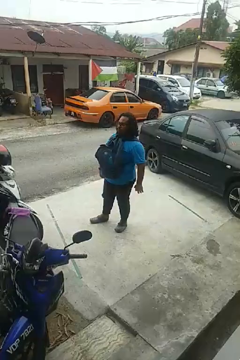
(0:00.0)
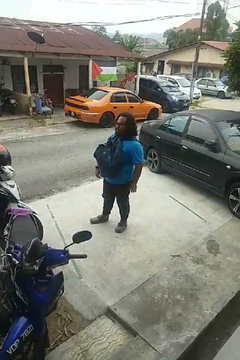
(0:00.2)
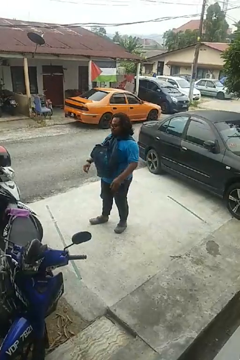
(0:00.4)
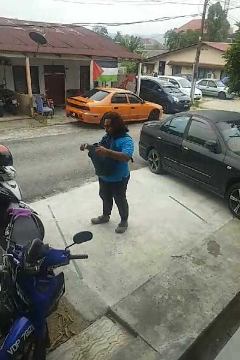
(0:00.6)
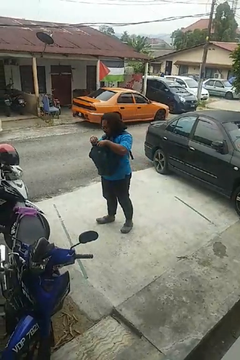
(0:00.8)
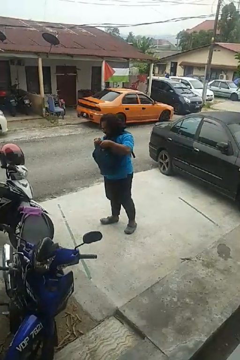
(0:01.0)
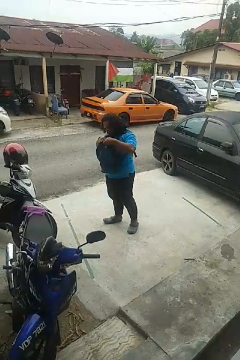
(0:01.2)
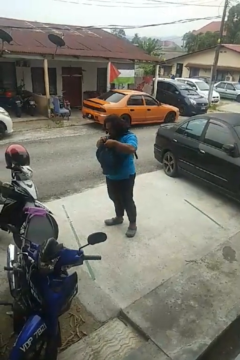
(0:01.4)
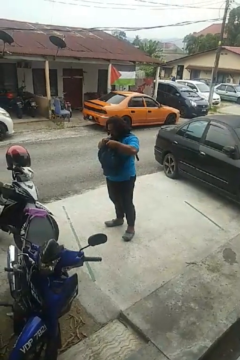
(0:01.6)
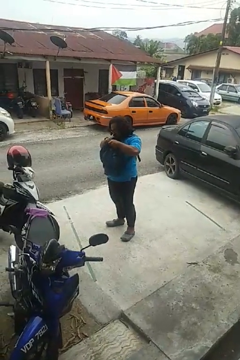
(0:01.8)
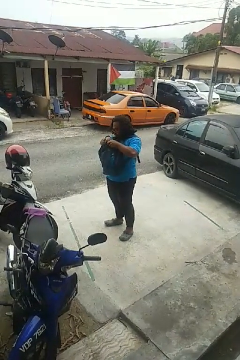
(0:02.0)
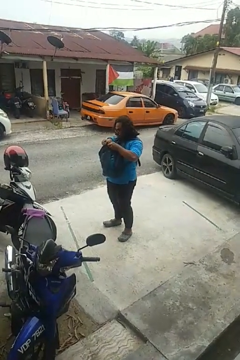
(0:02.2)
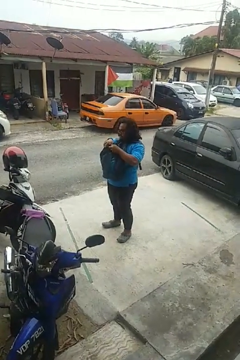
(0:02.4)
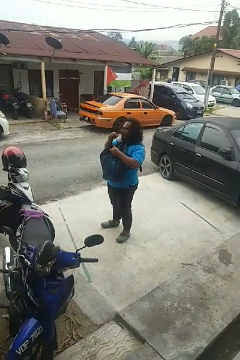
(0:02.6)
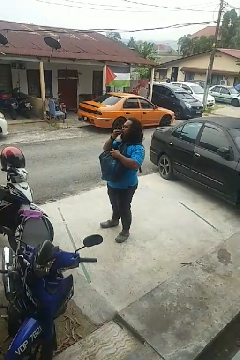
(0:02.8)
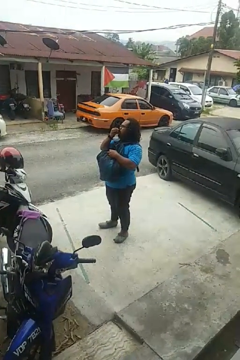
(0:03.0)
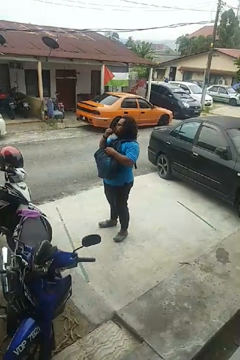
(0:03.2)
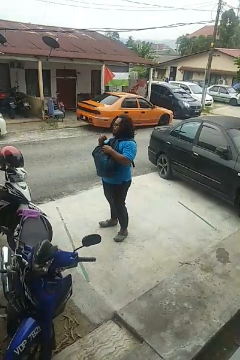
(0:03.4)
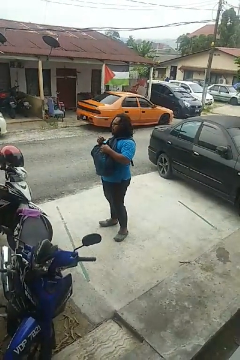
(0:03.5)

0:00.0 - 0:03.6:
person eats snack from bag

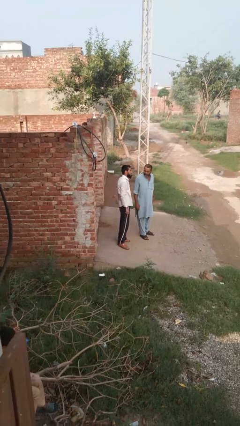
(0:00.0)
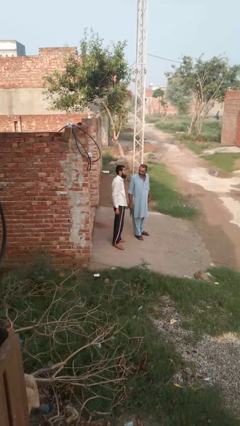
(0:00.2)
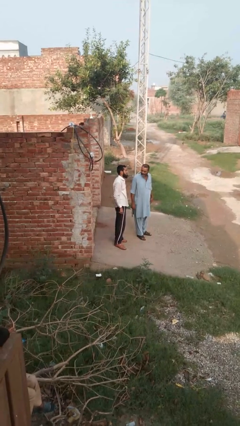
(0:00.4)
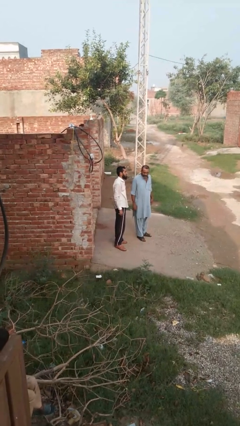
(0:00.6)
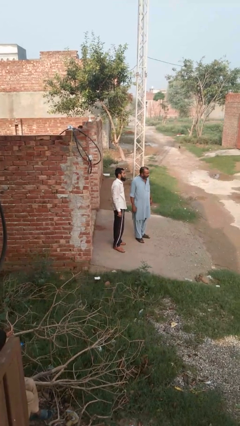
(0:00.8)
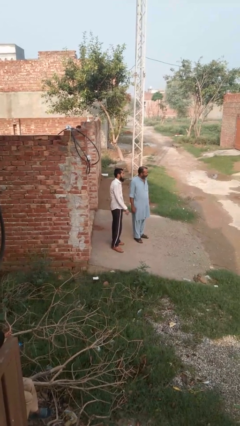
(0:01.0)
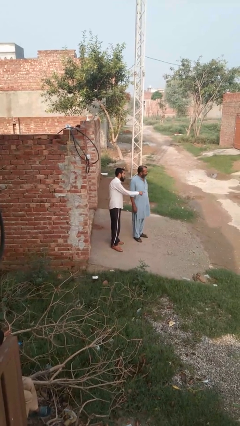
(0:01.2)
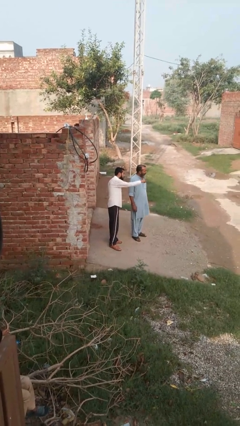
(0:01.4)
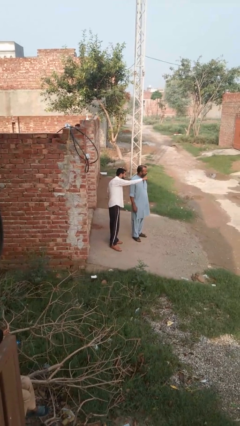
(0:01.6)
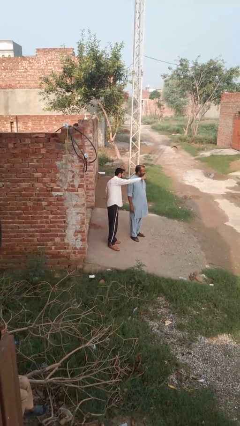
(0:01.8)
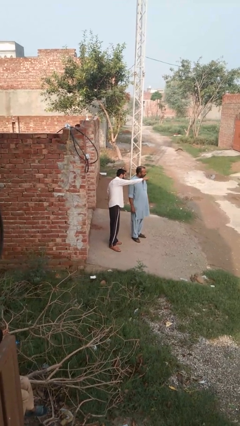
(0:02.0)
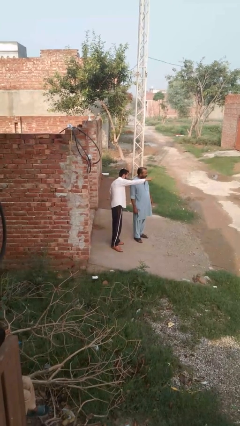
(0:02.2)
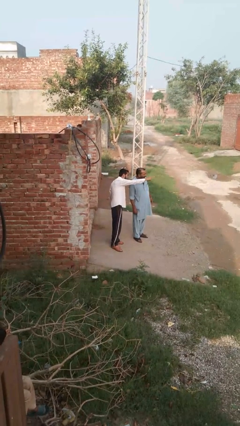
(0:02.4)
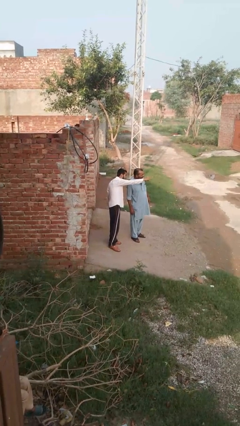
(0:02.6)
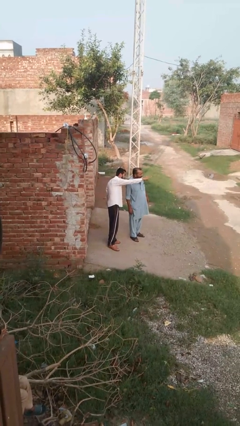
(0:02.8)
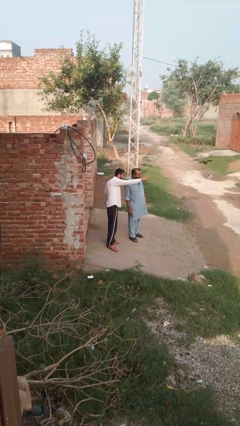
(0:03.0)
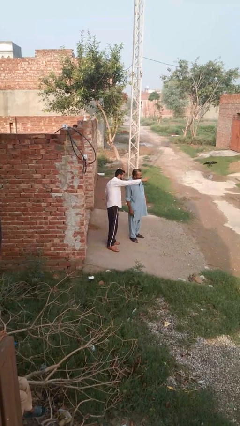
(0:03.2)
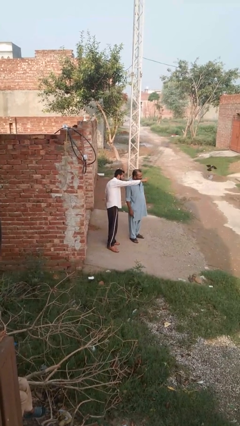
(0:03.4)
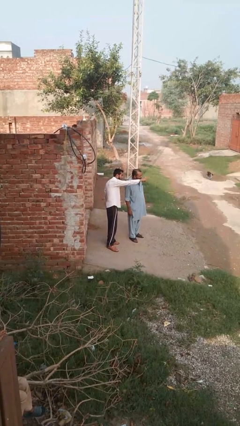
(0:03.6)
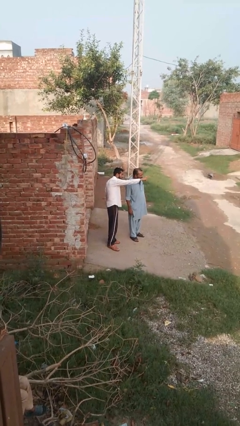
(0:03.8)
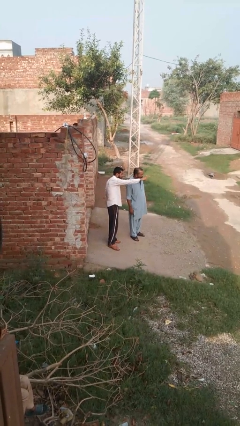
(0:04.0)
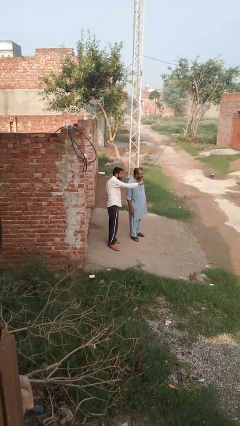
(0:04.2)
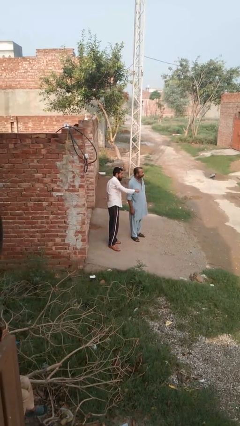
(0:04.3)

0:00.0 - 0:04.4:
person points at person

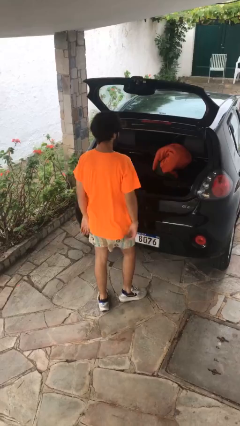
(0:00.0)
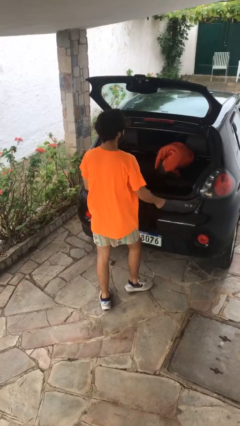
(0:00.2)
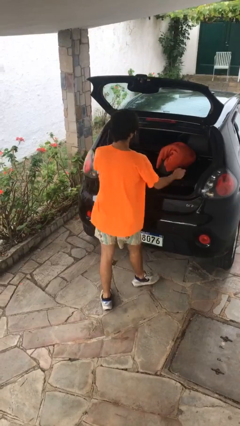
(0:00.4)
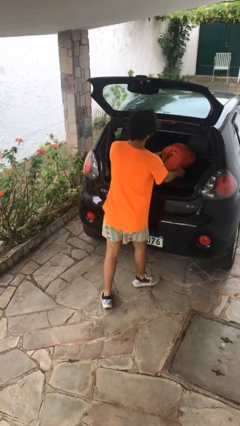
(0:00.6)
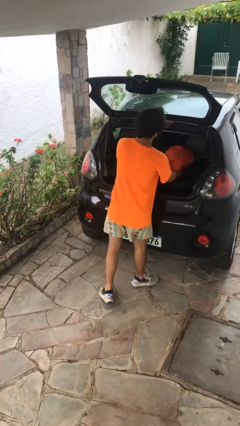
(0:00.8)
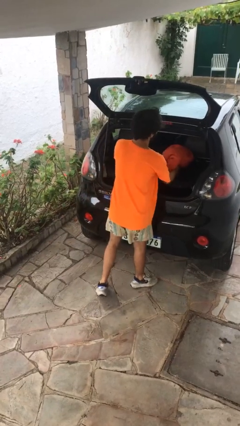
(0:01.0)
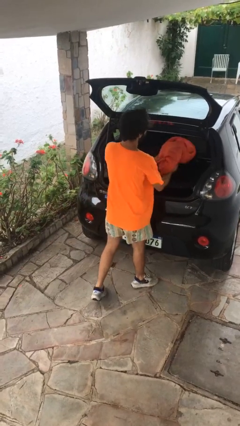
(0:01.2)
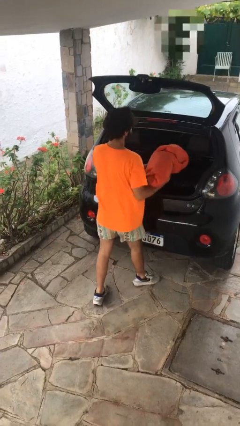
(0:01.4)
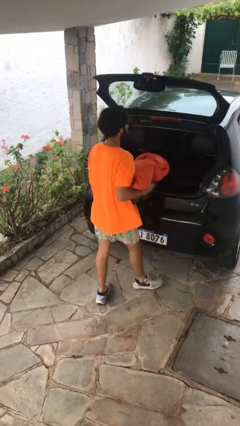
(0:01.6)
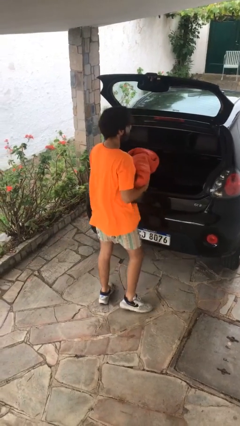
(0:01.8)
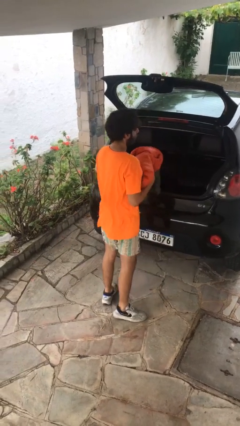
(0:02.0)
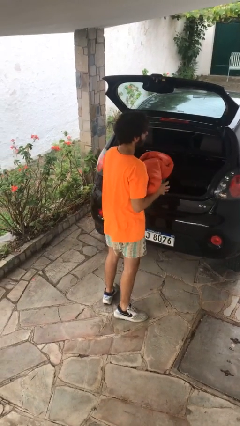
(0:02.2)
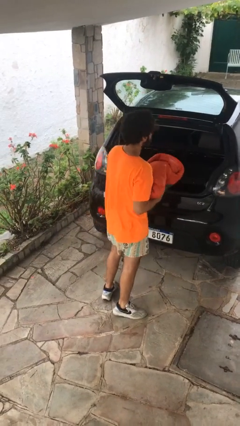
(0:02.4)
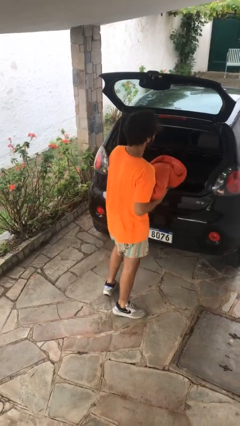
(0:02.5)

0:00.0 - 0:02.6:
person unloads car

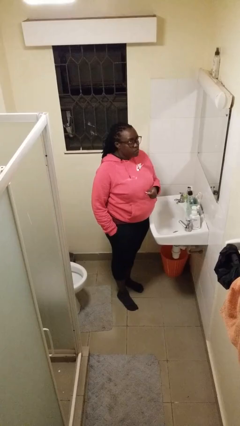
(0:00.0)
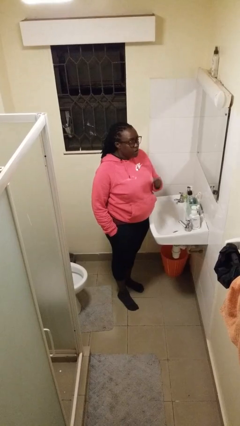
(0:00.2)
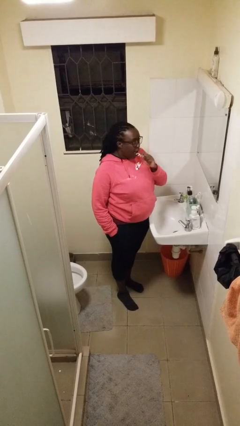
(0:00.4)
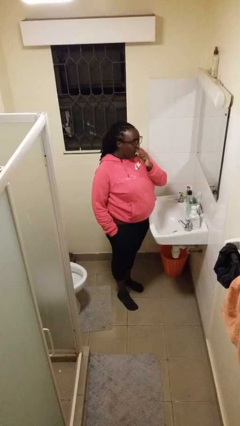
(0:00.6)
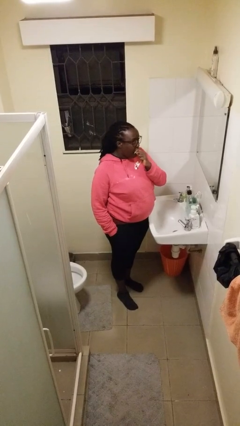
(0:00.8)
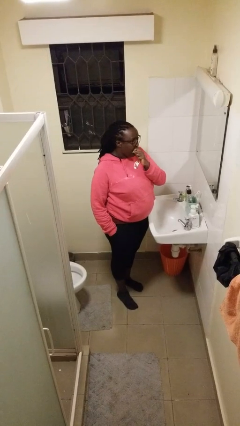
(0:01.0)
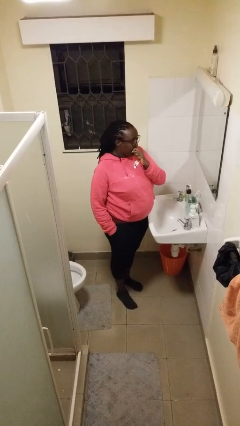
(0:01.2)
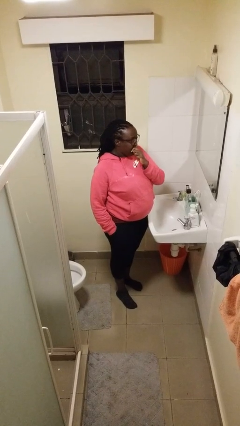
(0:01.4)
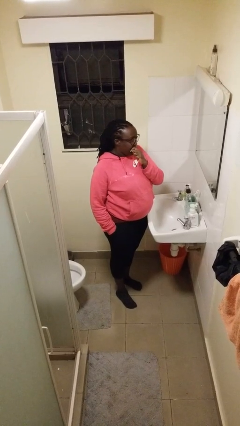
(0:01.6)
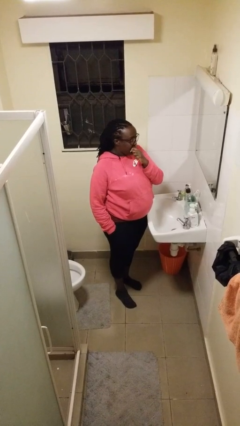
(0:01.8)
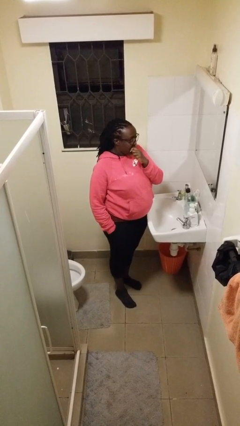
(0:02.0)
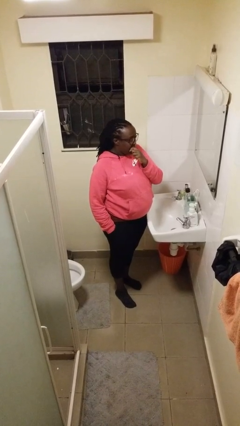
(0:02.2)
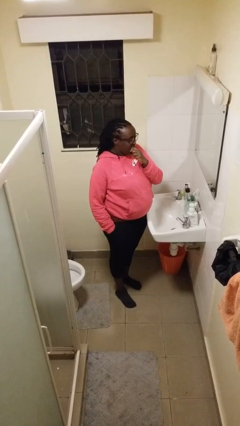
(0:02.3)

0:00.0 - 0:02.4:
person flosses

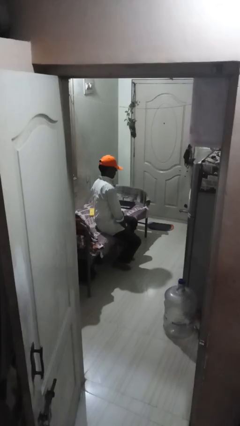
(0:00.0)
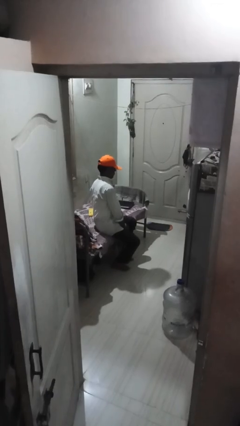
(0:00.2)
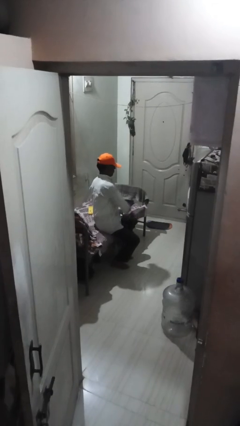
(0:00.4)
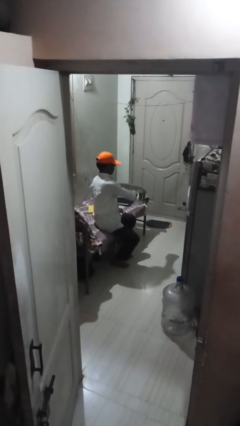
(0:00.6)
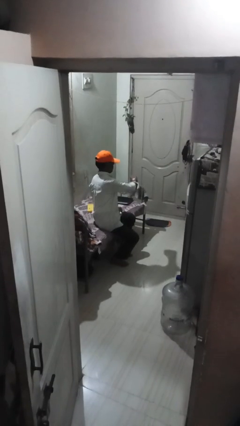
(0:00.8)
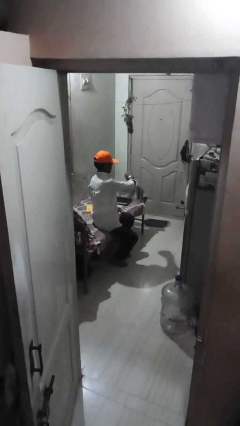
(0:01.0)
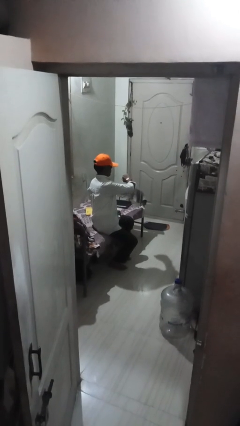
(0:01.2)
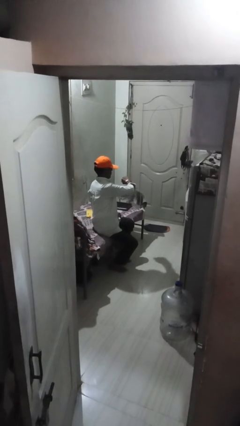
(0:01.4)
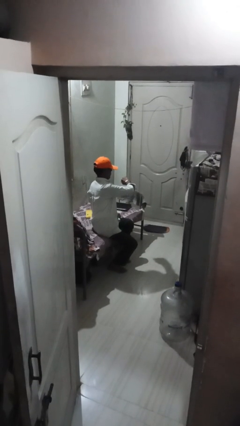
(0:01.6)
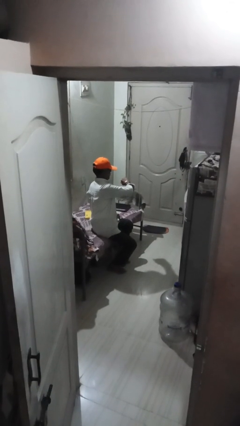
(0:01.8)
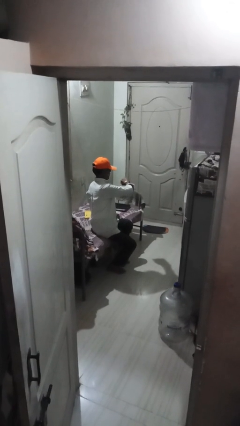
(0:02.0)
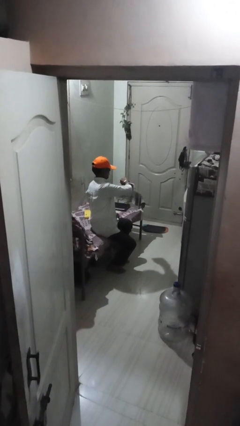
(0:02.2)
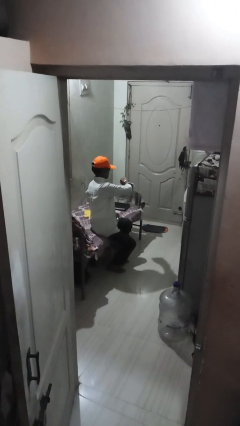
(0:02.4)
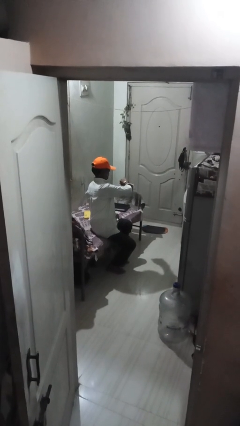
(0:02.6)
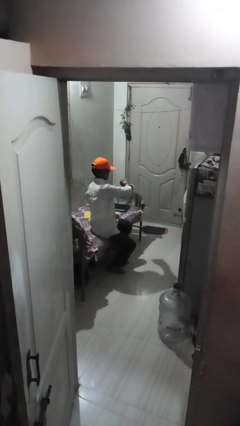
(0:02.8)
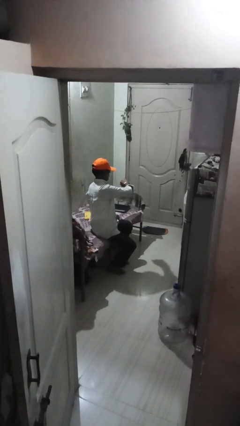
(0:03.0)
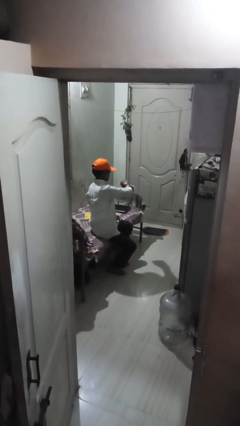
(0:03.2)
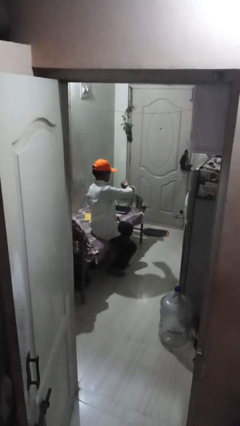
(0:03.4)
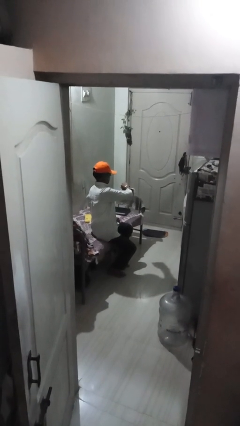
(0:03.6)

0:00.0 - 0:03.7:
person looks at wristwatch

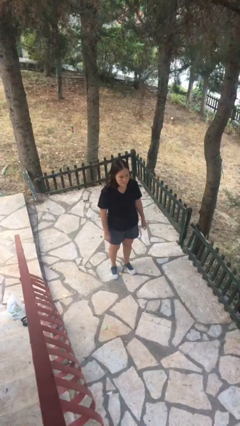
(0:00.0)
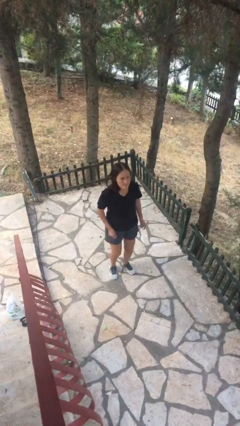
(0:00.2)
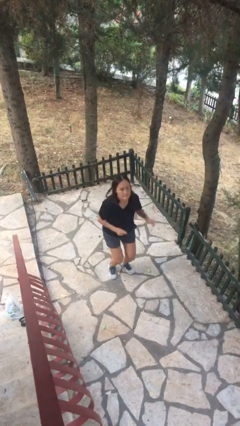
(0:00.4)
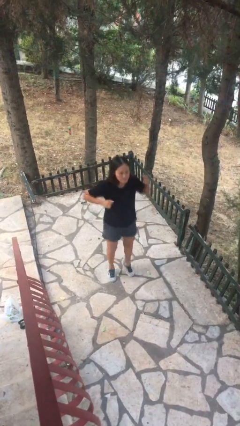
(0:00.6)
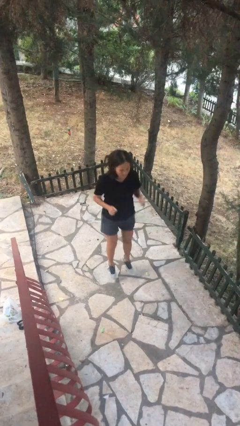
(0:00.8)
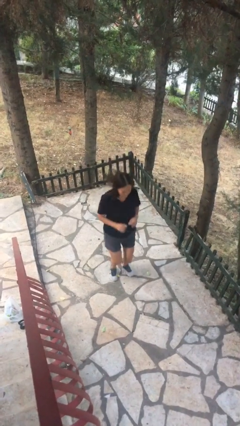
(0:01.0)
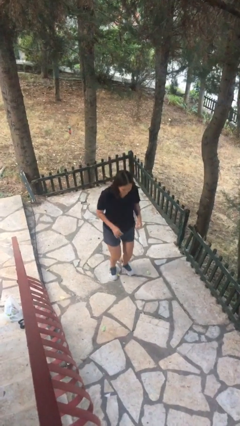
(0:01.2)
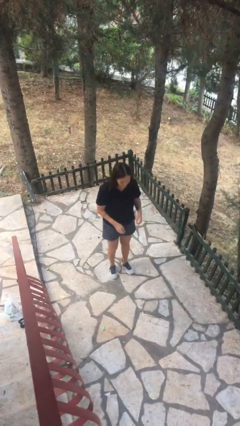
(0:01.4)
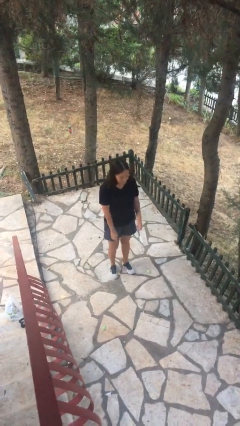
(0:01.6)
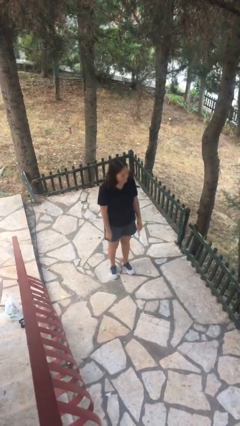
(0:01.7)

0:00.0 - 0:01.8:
person jumps
